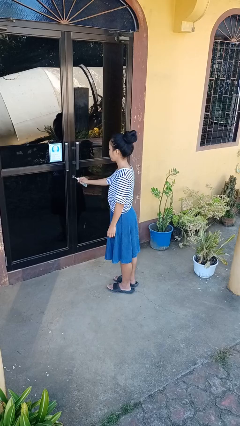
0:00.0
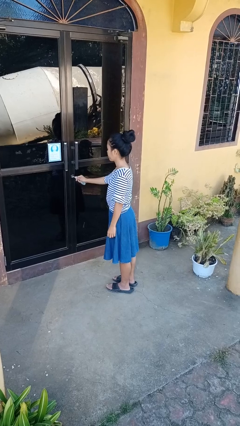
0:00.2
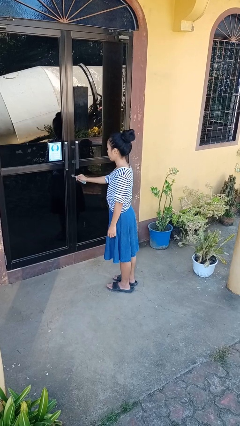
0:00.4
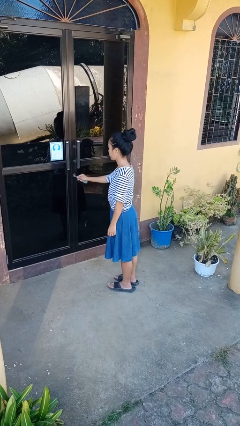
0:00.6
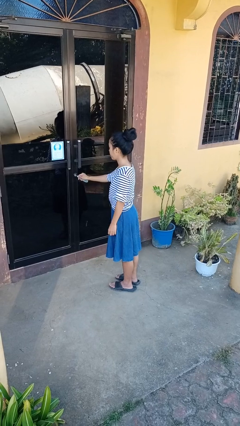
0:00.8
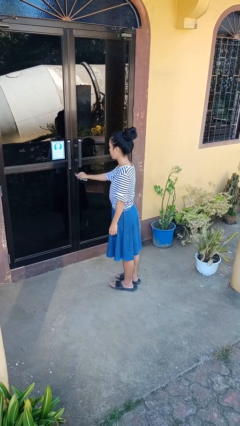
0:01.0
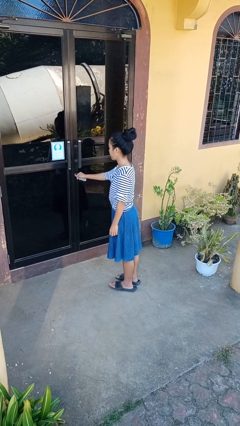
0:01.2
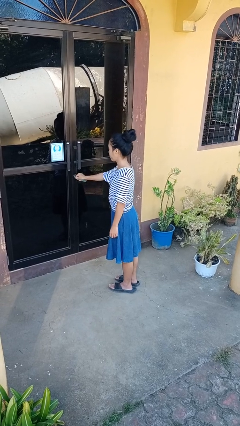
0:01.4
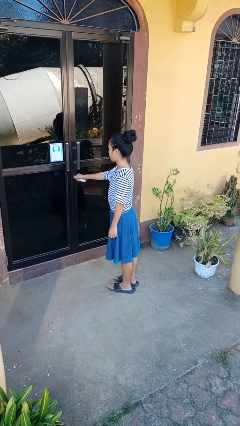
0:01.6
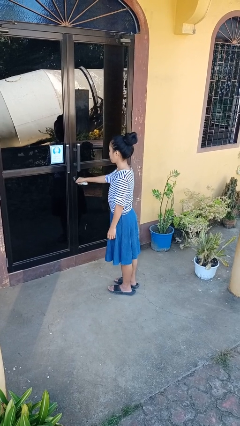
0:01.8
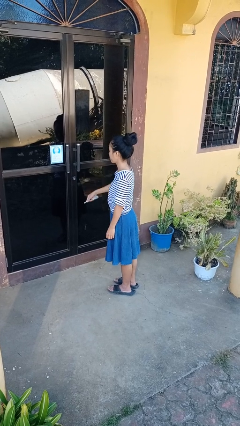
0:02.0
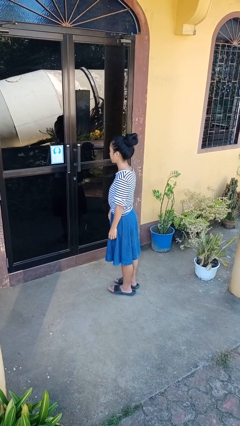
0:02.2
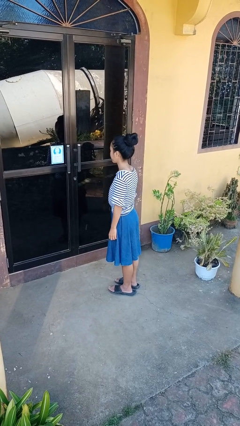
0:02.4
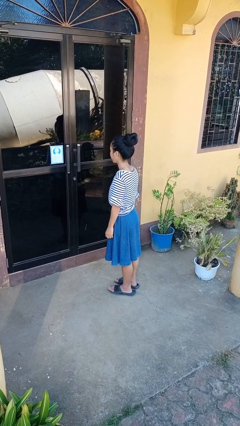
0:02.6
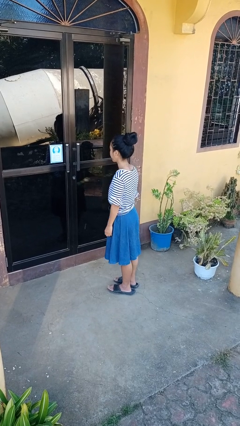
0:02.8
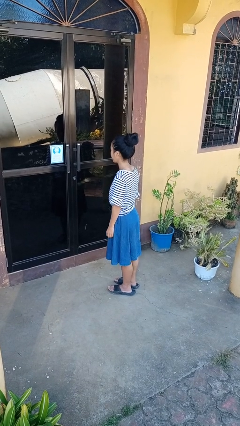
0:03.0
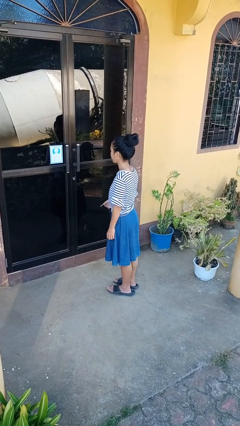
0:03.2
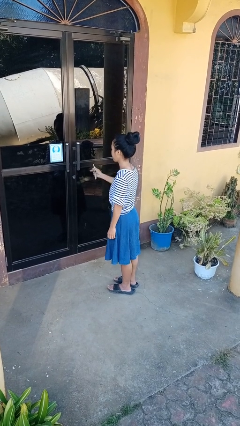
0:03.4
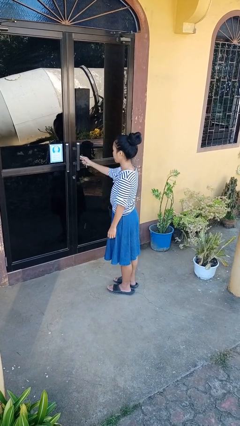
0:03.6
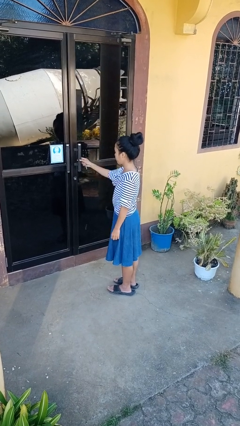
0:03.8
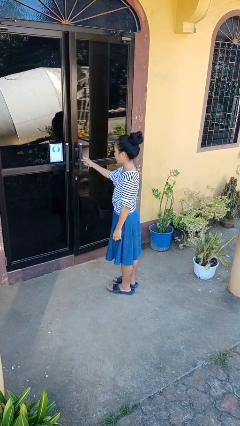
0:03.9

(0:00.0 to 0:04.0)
person unlocks door with keys

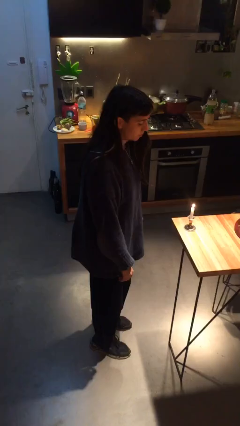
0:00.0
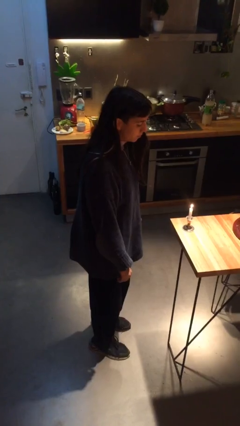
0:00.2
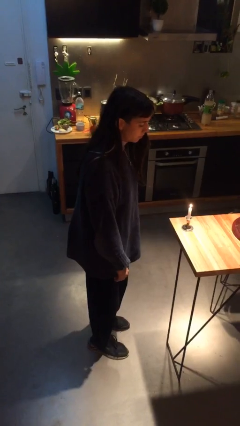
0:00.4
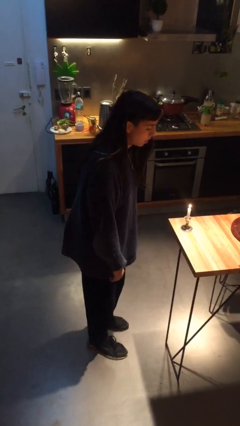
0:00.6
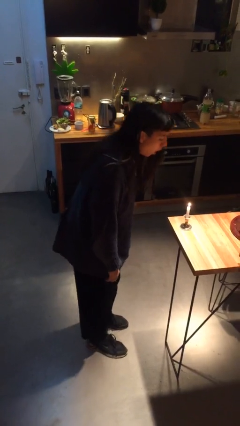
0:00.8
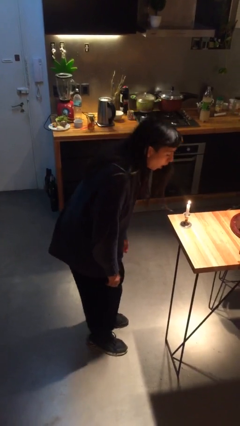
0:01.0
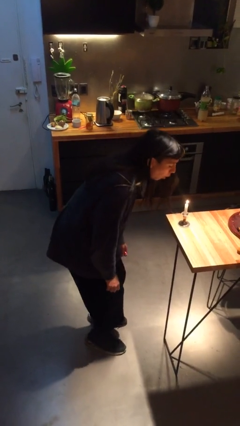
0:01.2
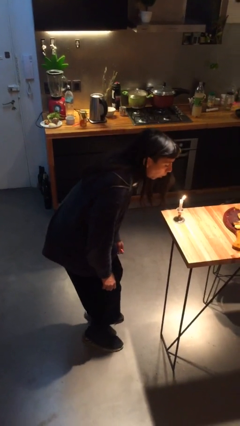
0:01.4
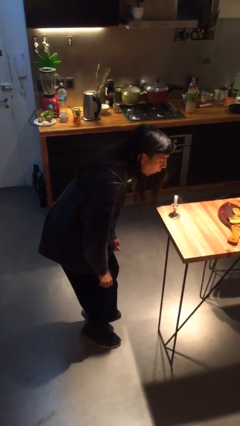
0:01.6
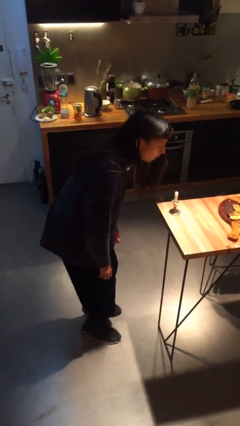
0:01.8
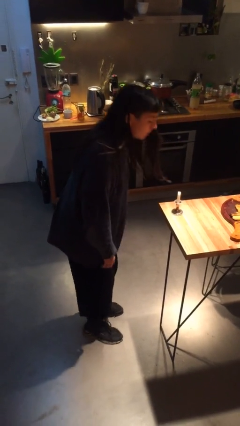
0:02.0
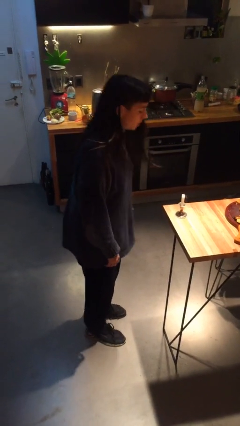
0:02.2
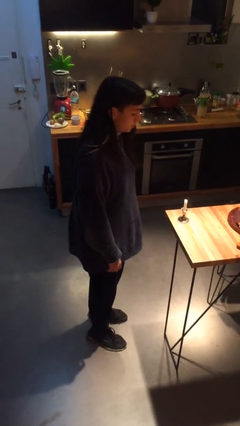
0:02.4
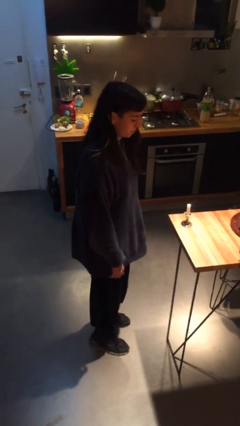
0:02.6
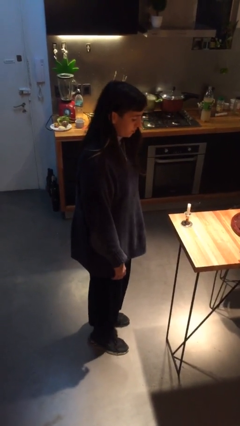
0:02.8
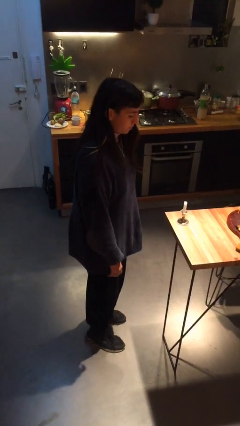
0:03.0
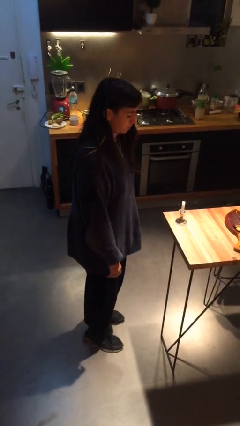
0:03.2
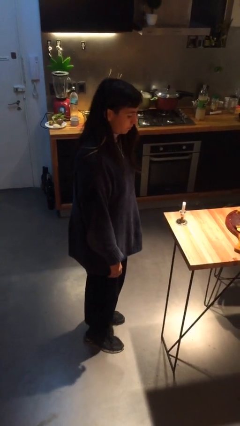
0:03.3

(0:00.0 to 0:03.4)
person extinguishes candle

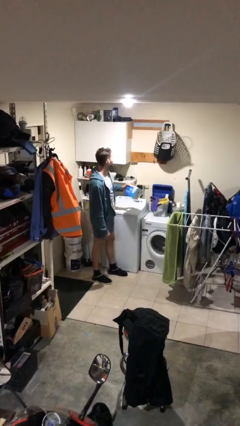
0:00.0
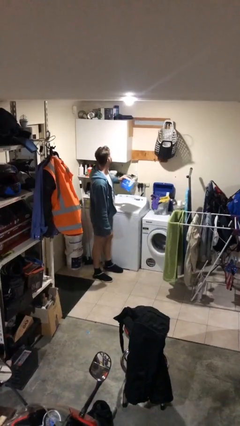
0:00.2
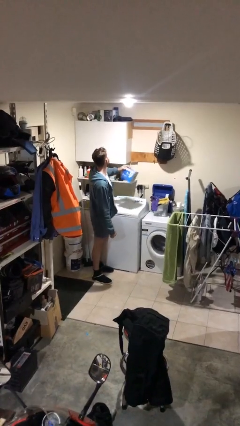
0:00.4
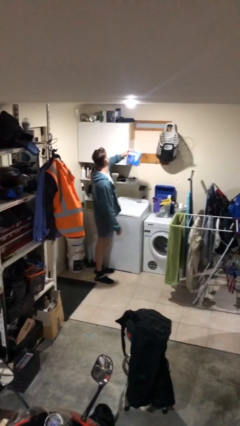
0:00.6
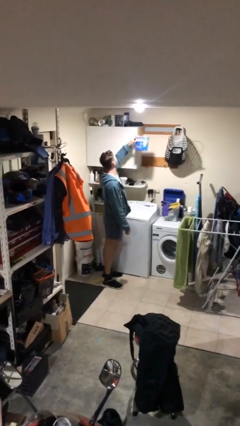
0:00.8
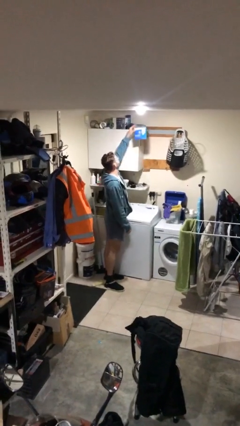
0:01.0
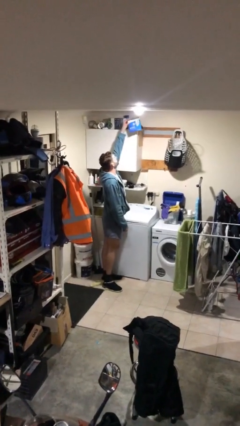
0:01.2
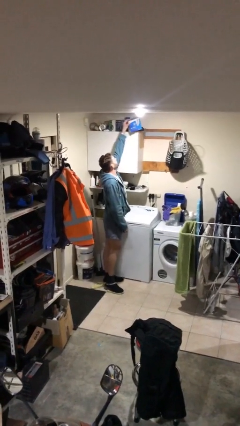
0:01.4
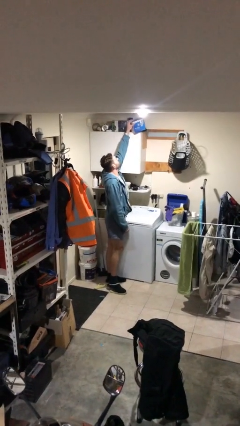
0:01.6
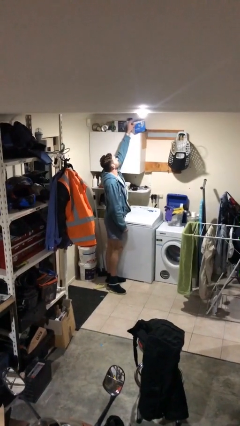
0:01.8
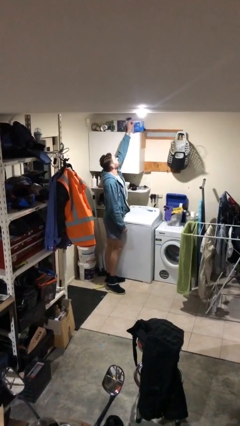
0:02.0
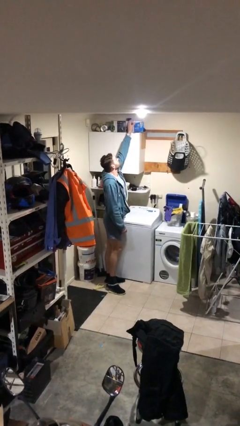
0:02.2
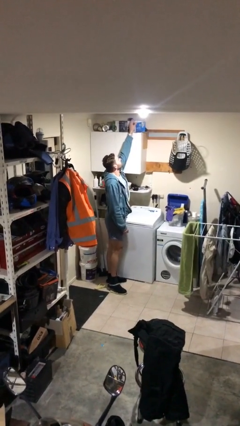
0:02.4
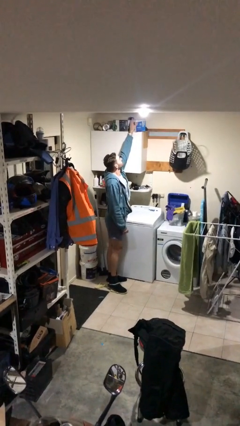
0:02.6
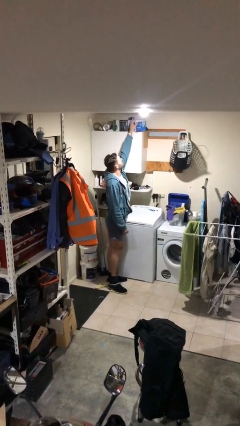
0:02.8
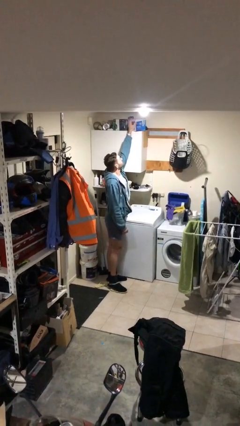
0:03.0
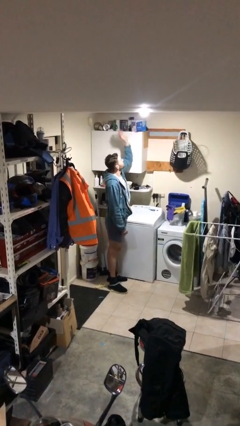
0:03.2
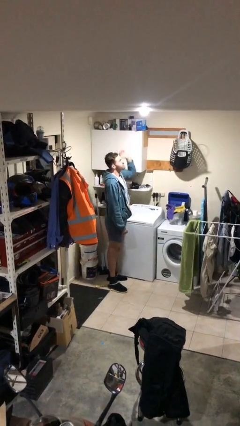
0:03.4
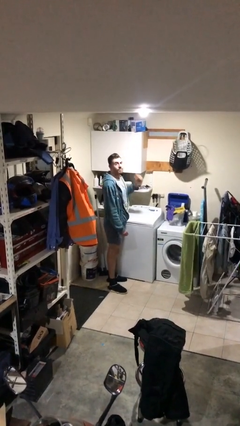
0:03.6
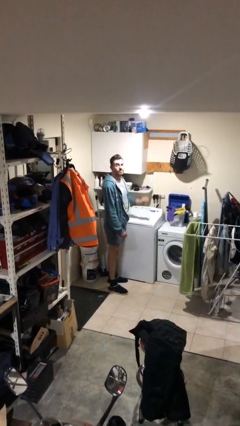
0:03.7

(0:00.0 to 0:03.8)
person puts down object on shelf

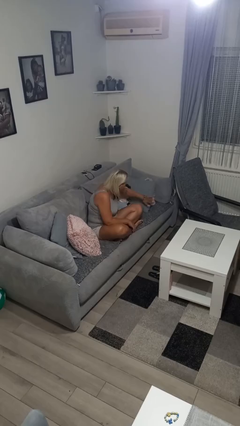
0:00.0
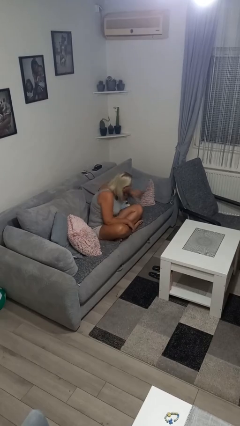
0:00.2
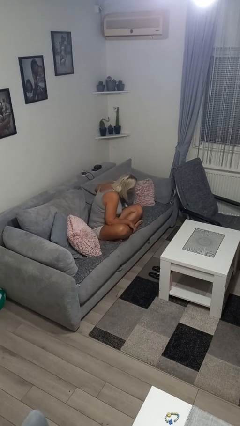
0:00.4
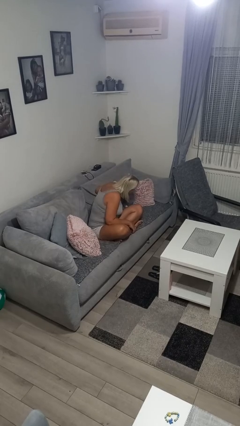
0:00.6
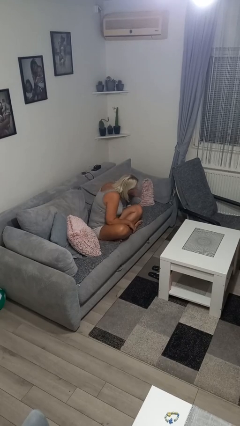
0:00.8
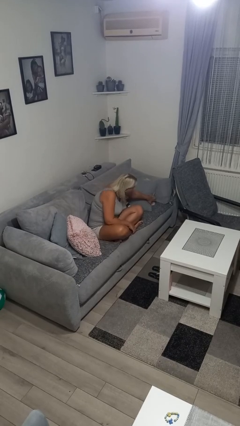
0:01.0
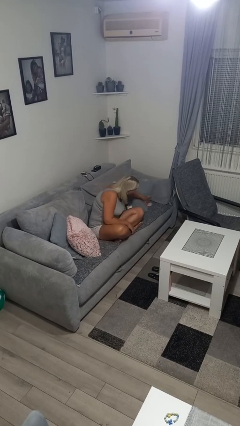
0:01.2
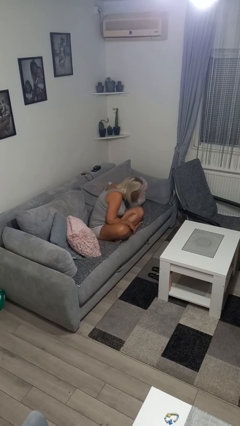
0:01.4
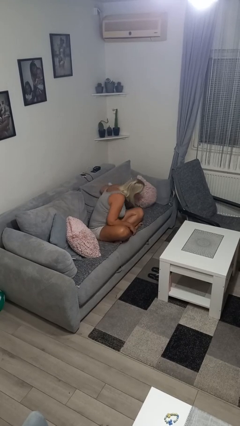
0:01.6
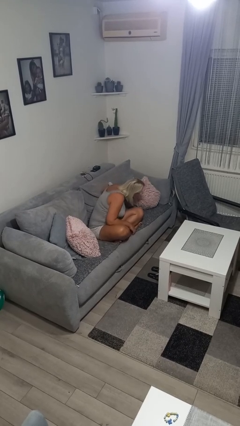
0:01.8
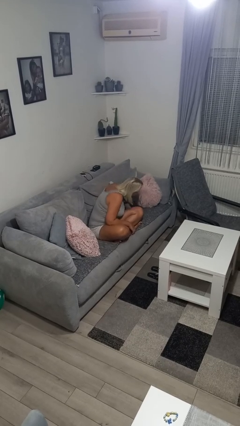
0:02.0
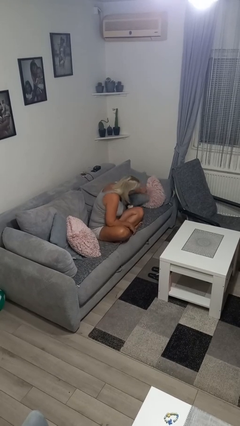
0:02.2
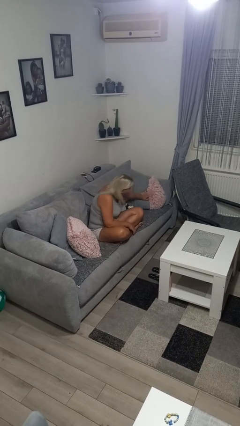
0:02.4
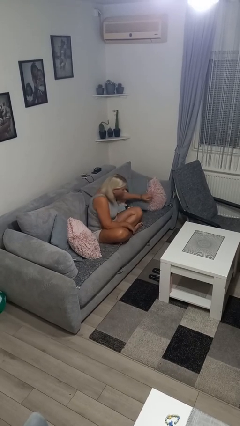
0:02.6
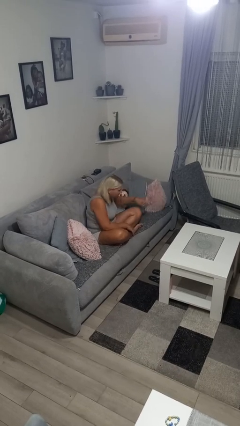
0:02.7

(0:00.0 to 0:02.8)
person searches in couch

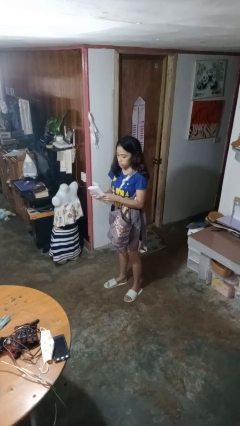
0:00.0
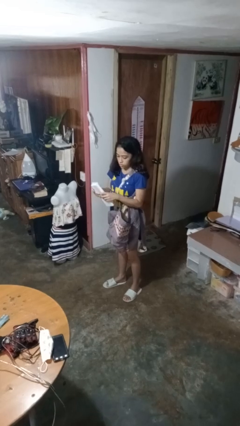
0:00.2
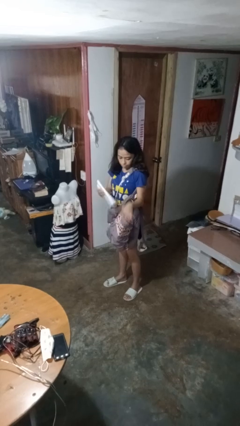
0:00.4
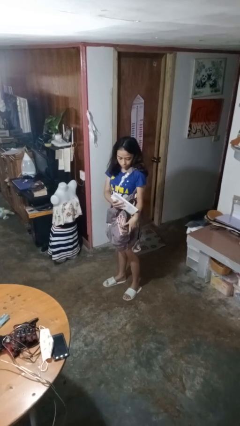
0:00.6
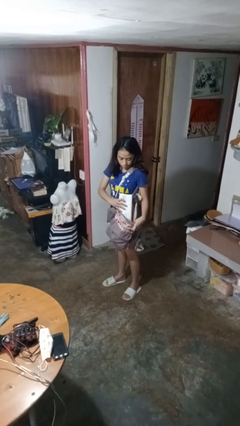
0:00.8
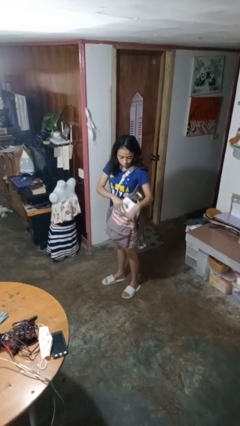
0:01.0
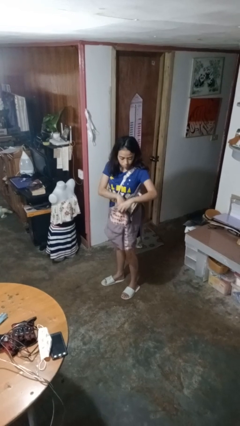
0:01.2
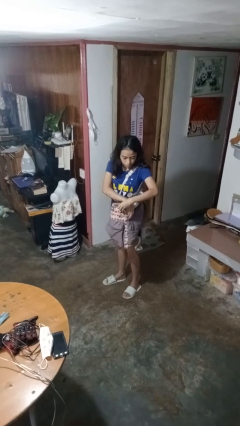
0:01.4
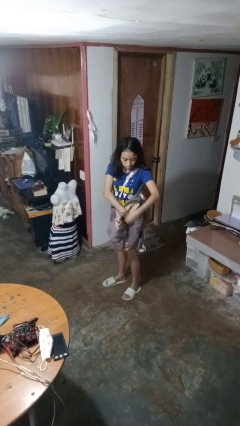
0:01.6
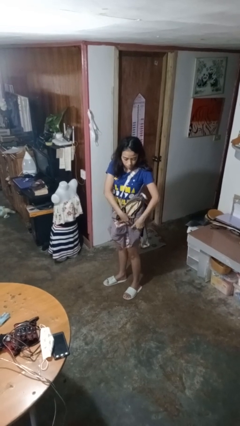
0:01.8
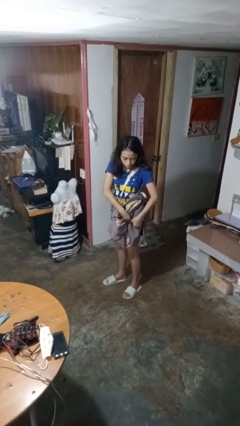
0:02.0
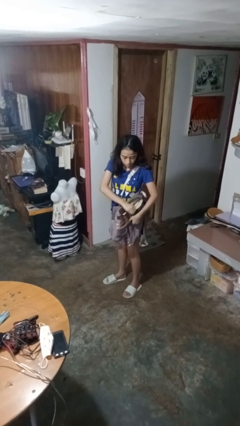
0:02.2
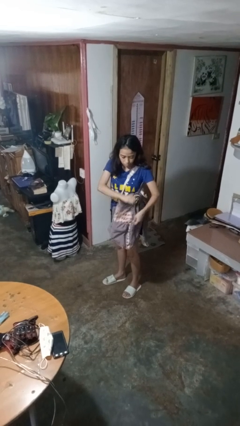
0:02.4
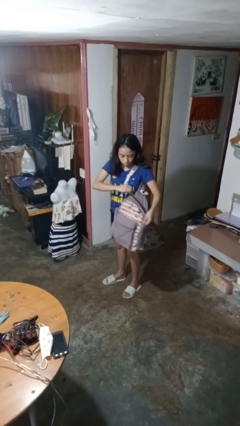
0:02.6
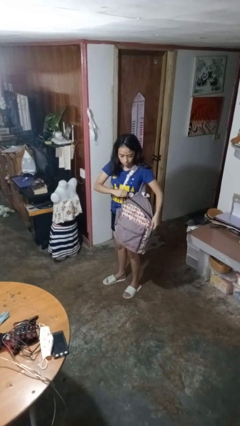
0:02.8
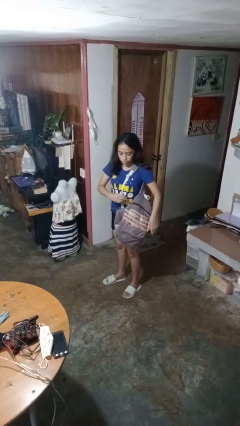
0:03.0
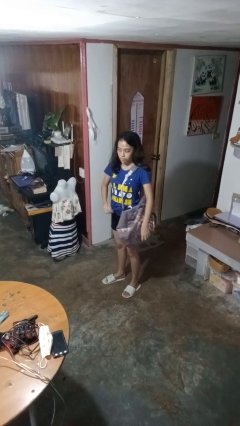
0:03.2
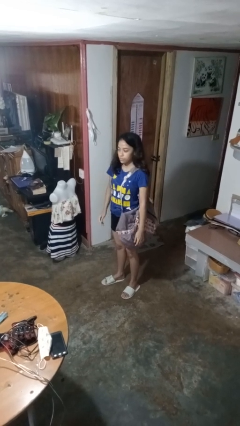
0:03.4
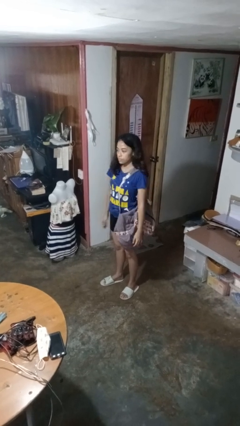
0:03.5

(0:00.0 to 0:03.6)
person puts object into backpack
